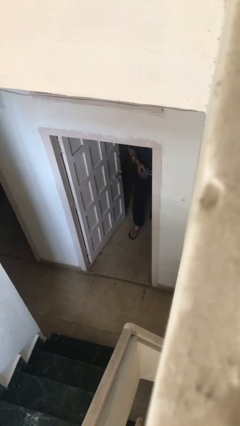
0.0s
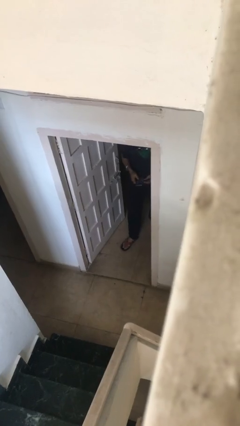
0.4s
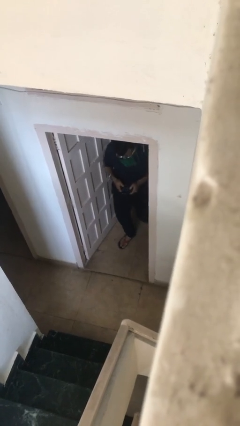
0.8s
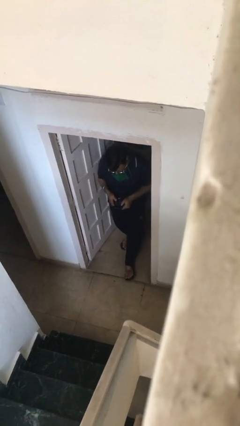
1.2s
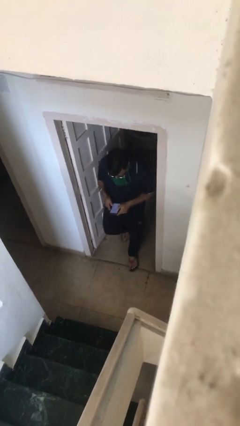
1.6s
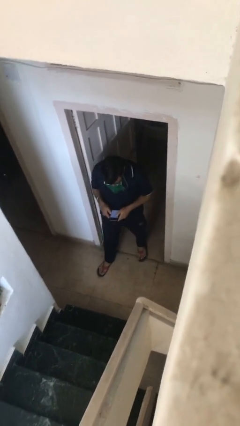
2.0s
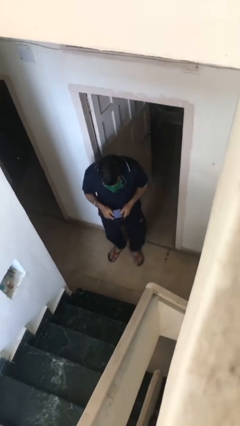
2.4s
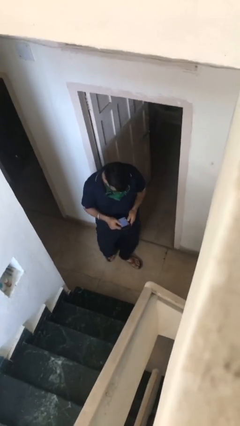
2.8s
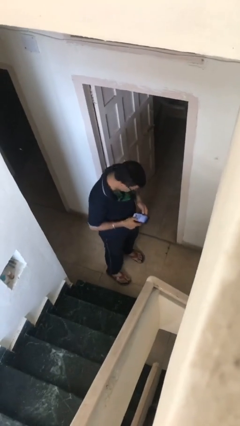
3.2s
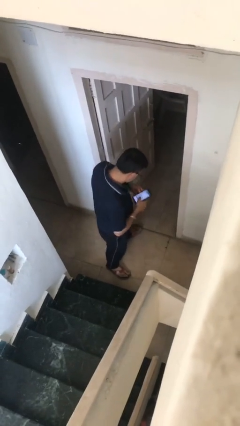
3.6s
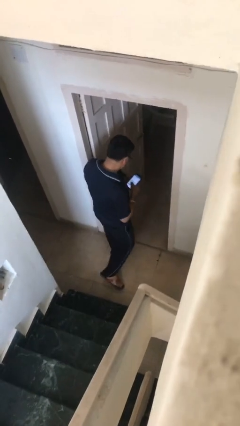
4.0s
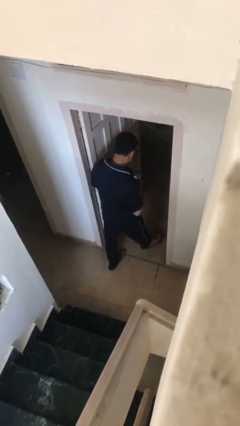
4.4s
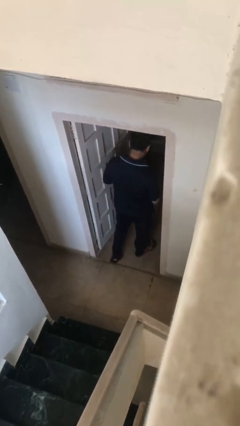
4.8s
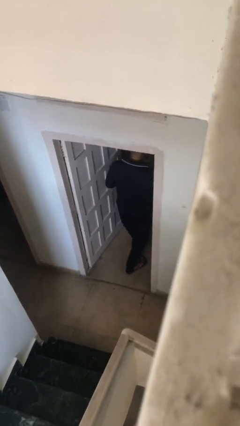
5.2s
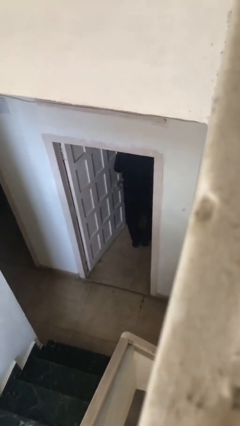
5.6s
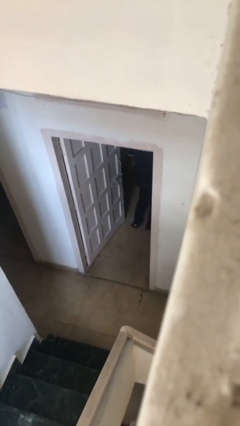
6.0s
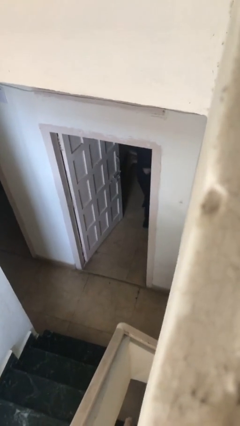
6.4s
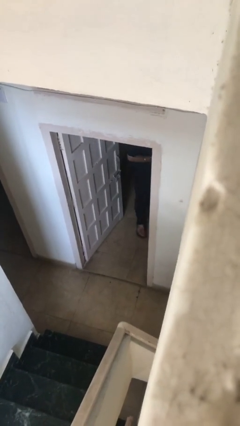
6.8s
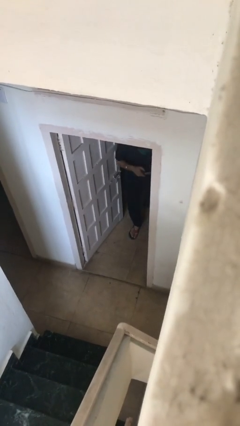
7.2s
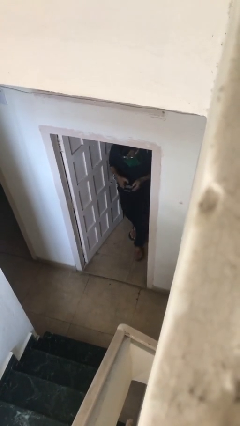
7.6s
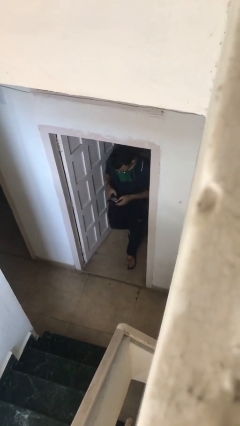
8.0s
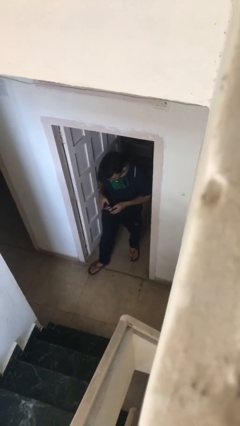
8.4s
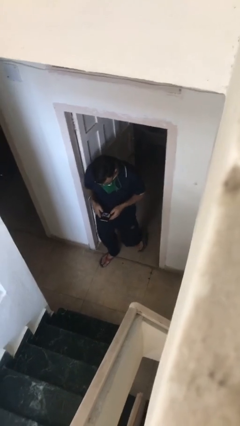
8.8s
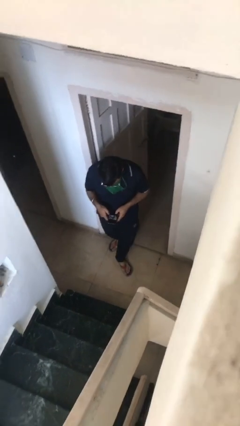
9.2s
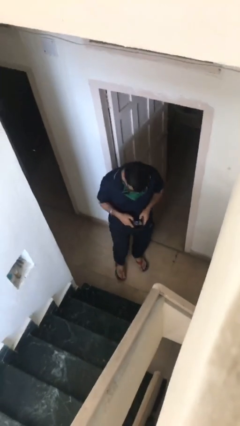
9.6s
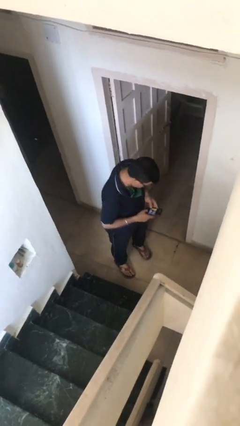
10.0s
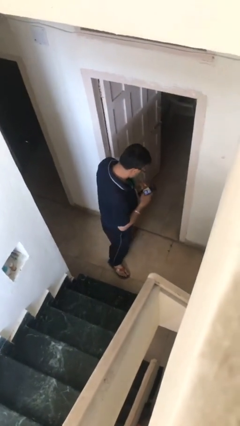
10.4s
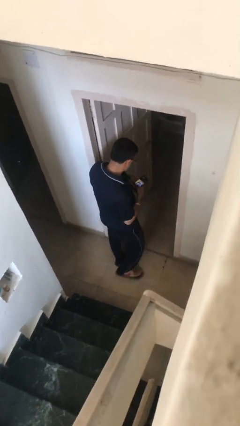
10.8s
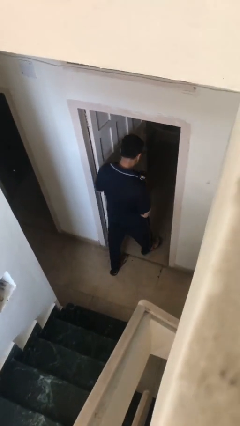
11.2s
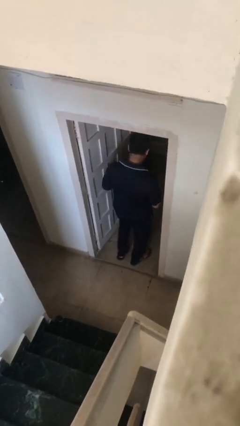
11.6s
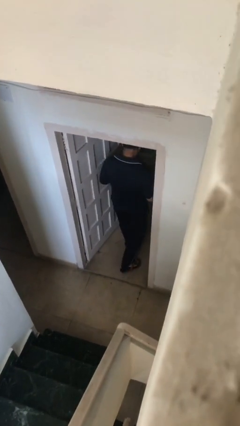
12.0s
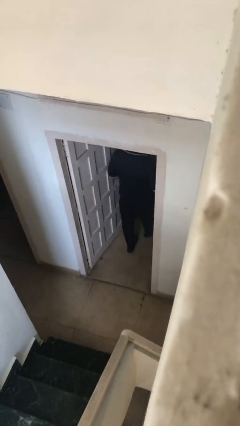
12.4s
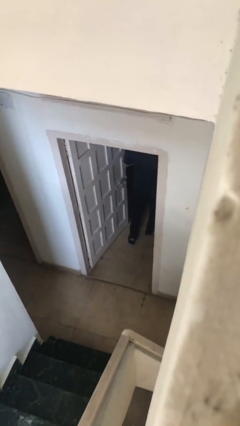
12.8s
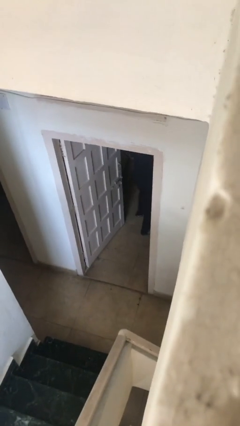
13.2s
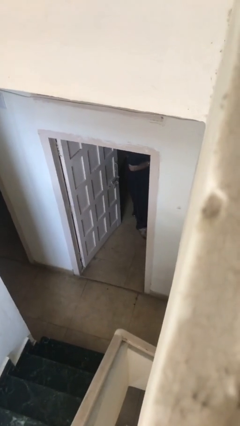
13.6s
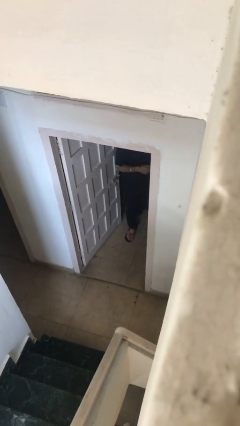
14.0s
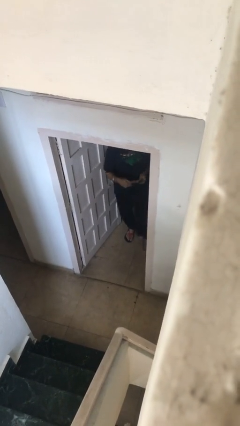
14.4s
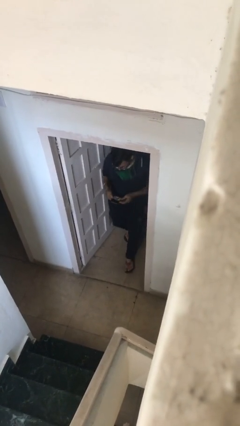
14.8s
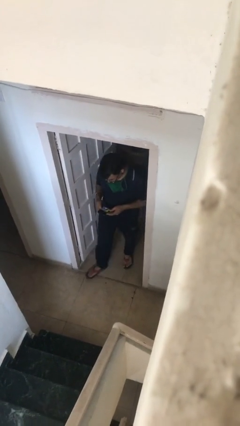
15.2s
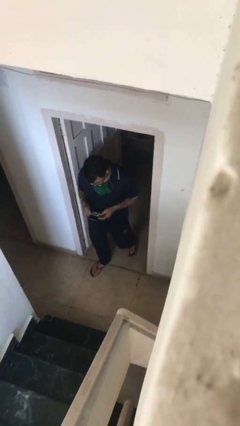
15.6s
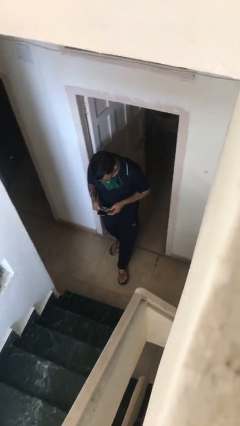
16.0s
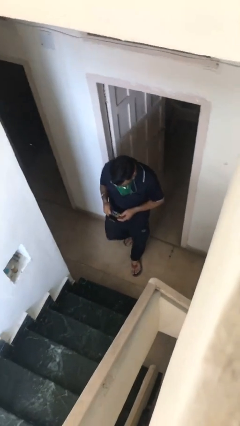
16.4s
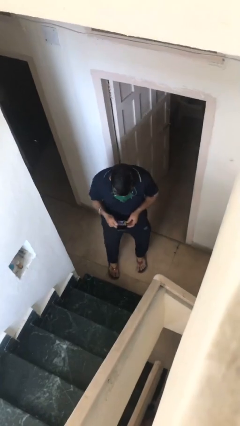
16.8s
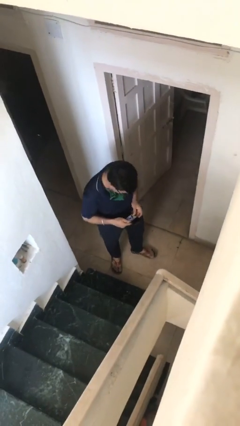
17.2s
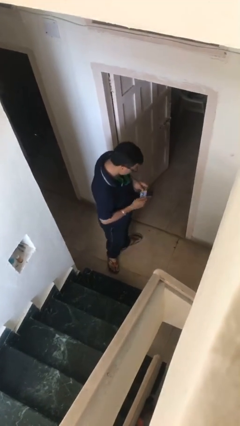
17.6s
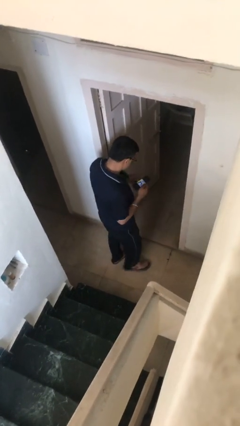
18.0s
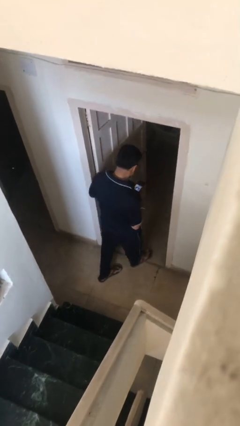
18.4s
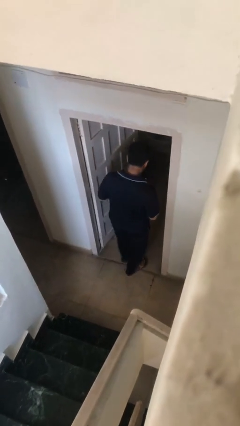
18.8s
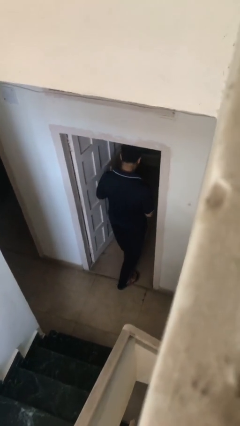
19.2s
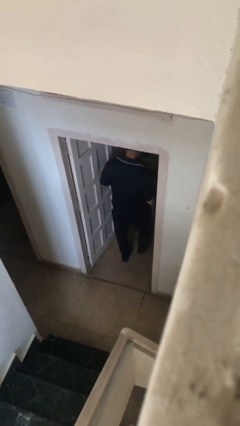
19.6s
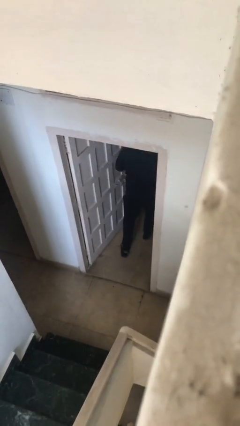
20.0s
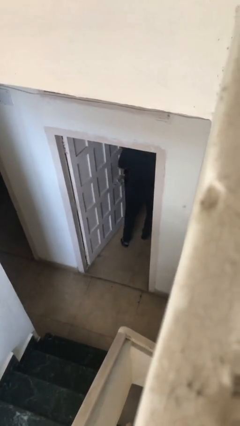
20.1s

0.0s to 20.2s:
person texts on phone

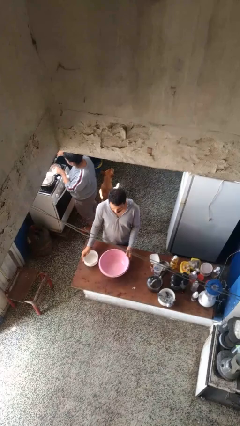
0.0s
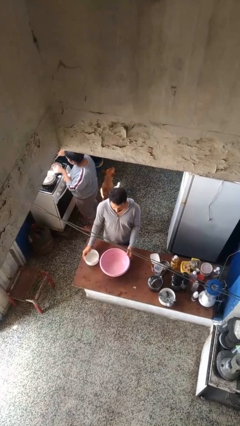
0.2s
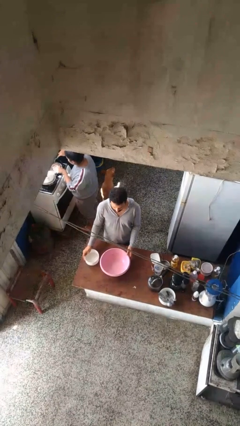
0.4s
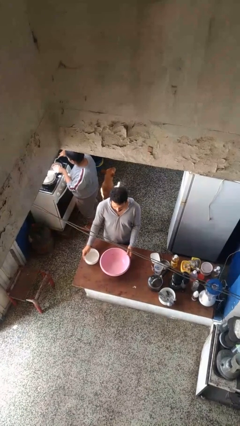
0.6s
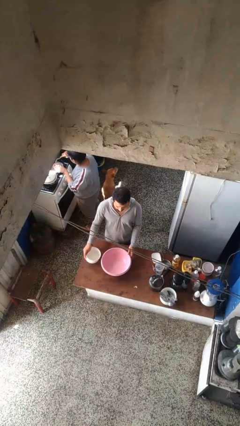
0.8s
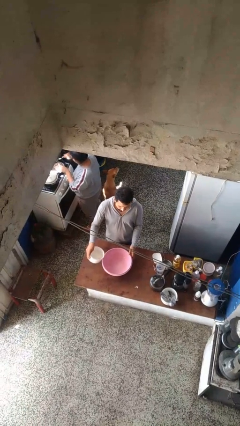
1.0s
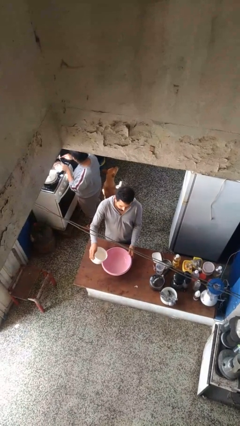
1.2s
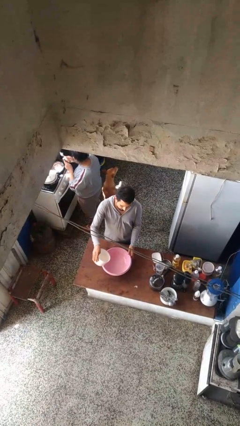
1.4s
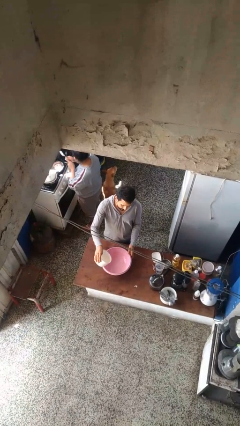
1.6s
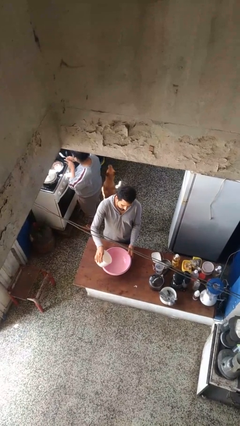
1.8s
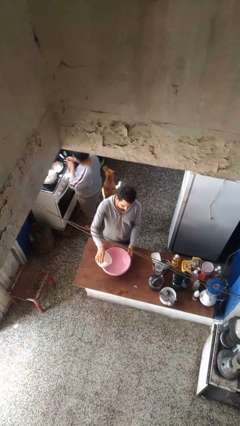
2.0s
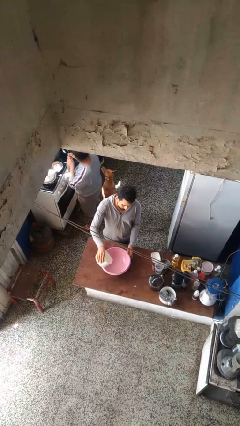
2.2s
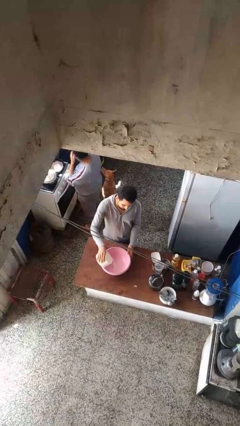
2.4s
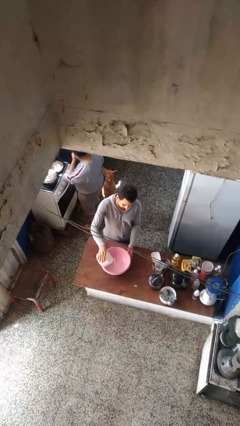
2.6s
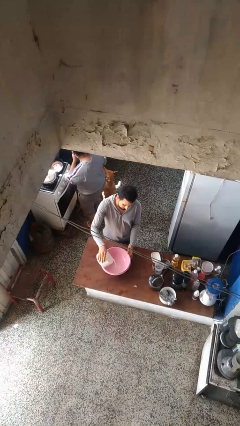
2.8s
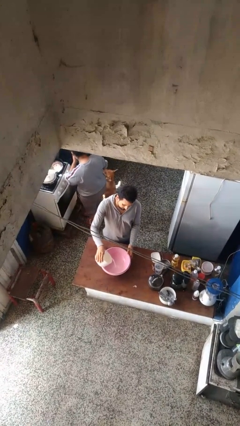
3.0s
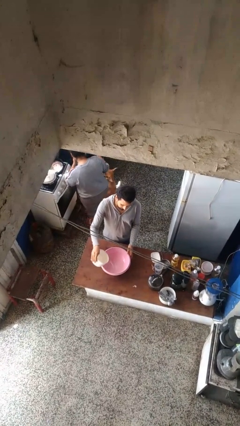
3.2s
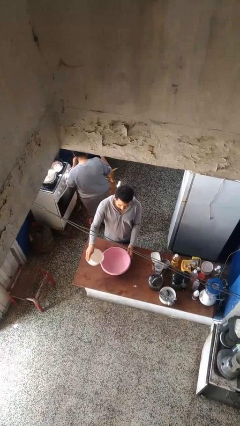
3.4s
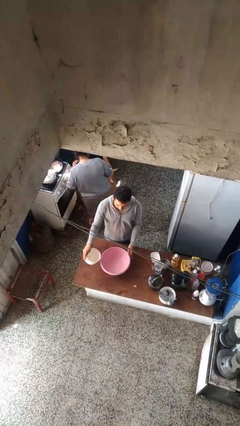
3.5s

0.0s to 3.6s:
person pours into bowl

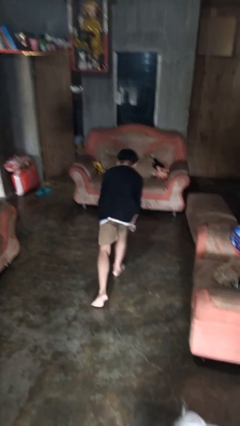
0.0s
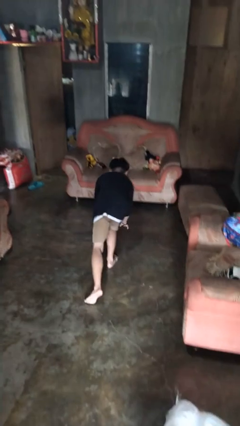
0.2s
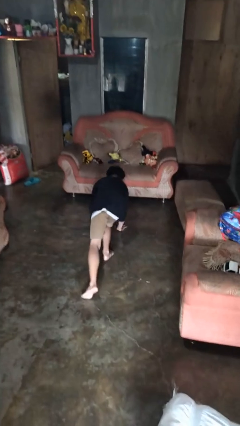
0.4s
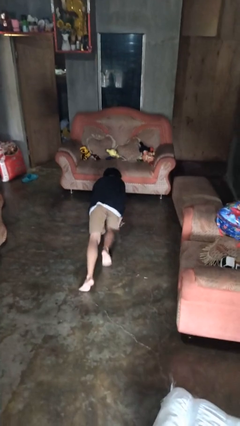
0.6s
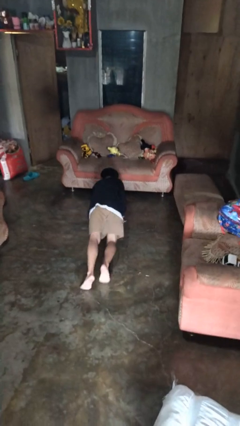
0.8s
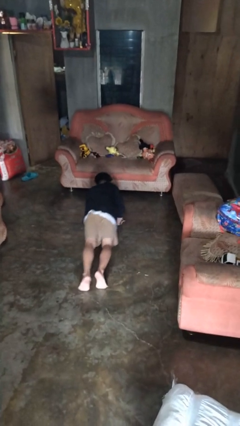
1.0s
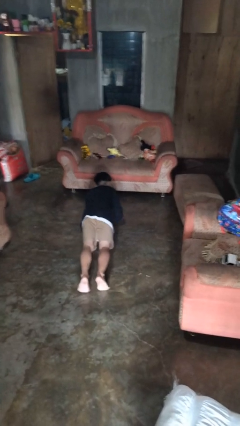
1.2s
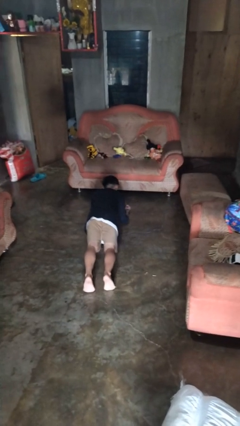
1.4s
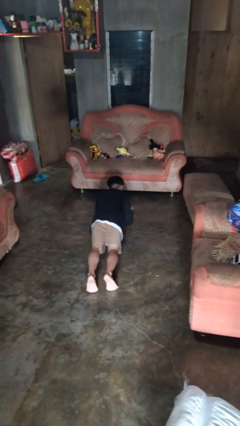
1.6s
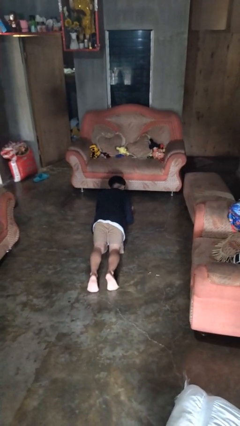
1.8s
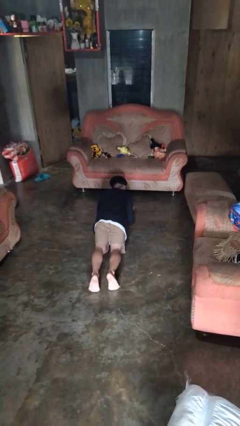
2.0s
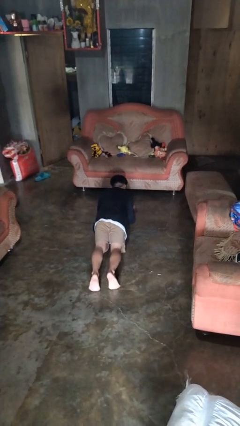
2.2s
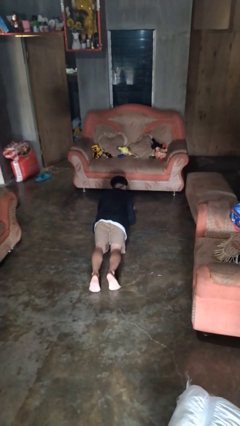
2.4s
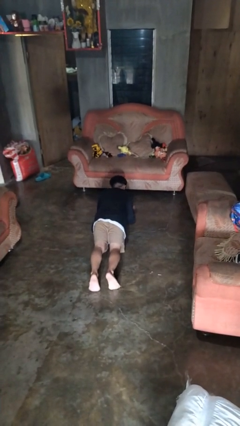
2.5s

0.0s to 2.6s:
person exercises with plank

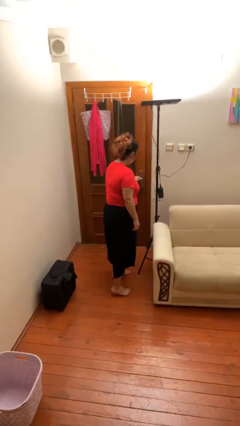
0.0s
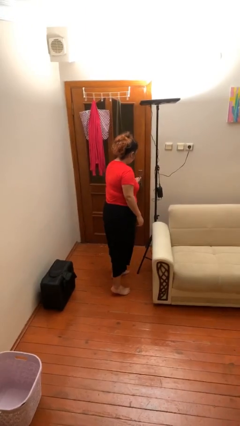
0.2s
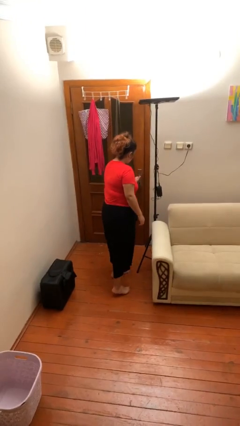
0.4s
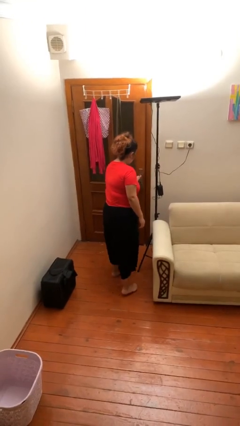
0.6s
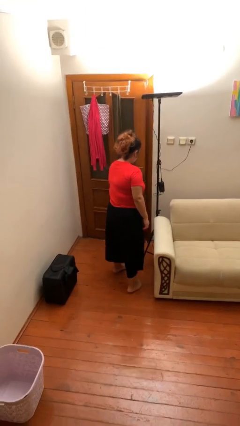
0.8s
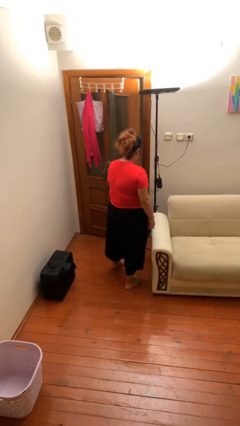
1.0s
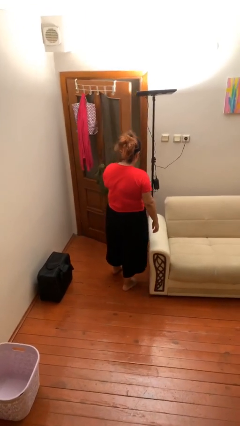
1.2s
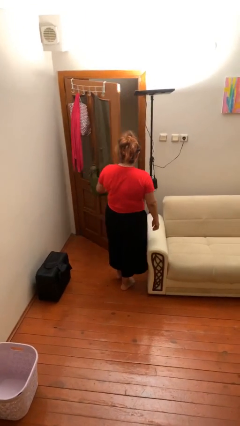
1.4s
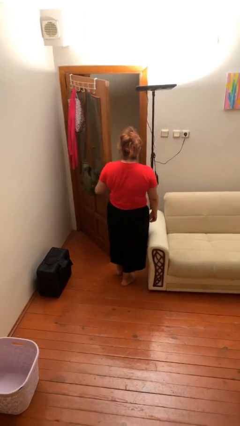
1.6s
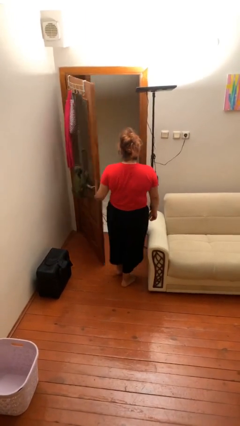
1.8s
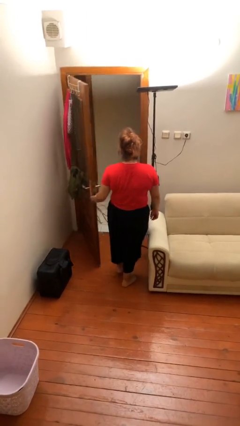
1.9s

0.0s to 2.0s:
person opens facility door
